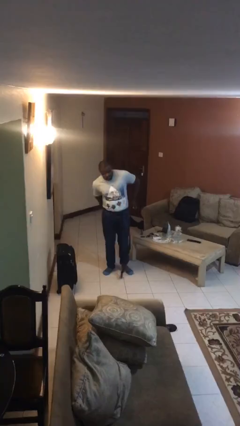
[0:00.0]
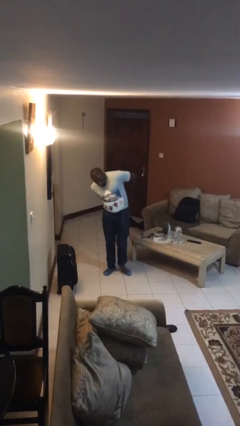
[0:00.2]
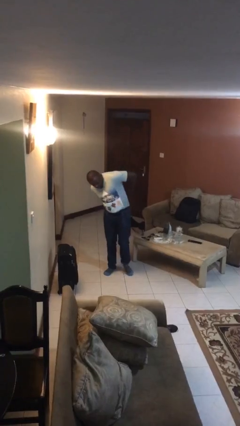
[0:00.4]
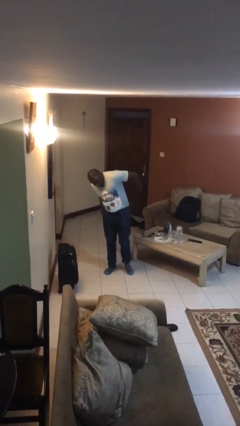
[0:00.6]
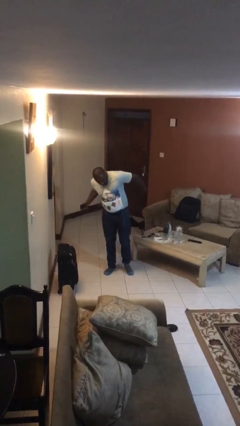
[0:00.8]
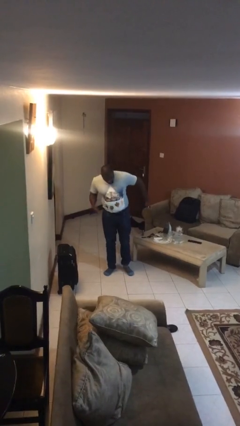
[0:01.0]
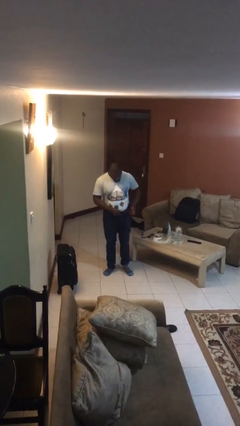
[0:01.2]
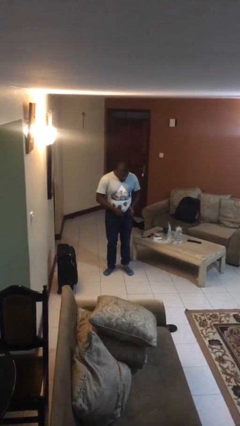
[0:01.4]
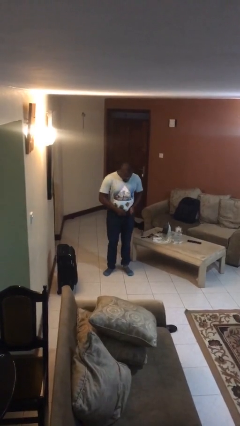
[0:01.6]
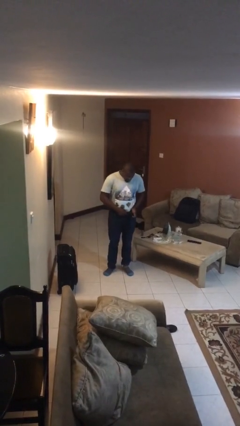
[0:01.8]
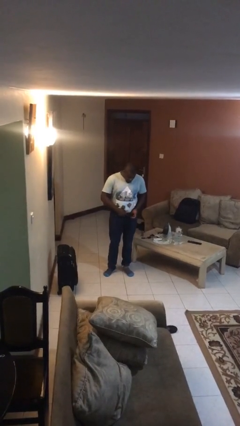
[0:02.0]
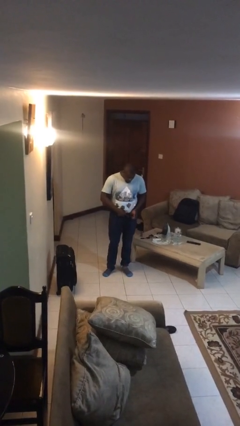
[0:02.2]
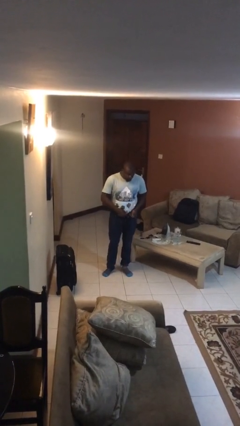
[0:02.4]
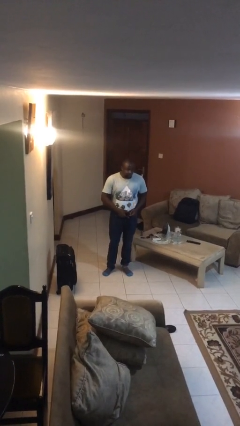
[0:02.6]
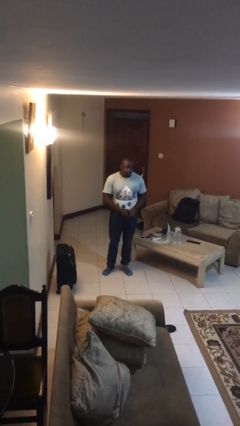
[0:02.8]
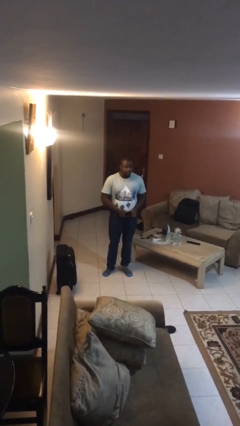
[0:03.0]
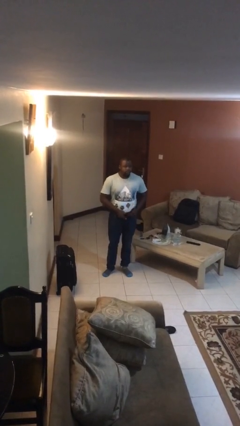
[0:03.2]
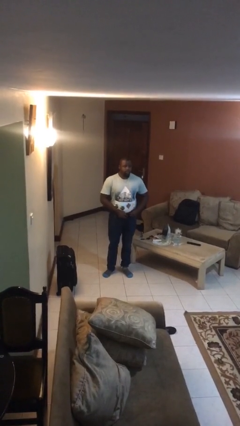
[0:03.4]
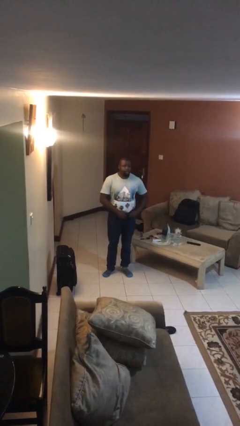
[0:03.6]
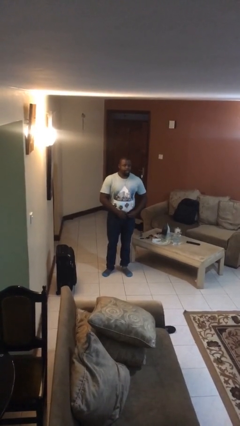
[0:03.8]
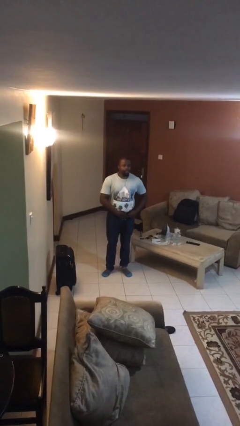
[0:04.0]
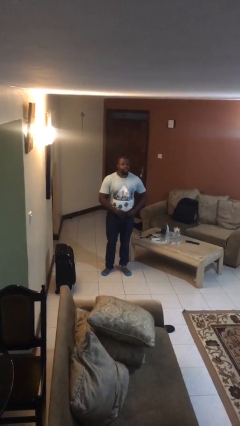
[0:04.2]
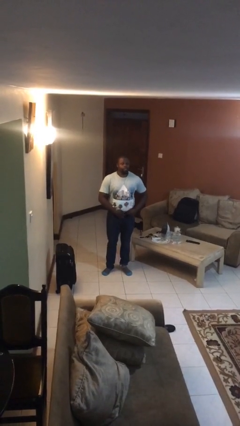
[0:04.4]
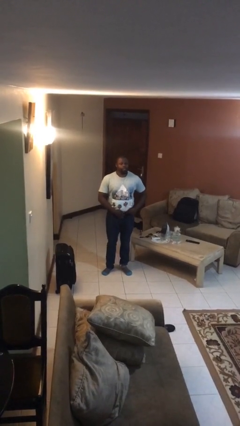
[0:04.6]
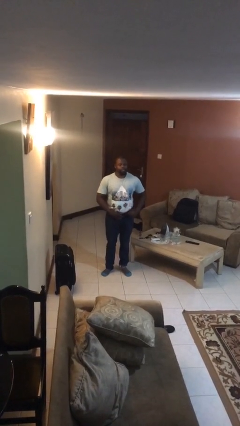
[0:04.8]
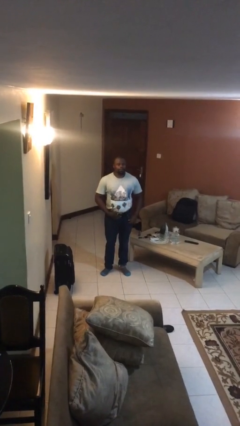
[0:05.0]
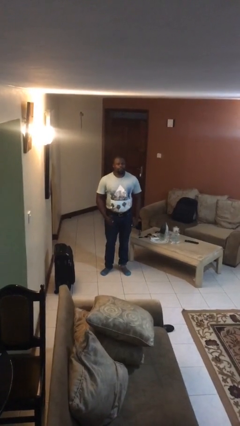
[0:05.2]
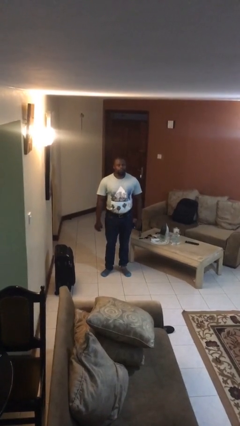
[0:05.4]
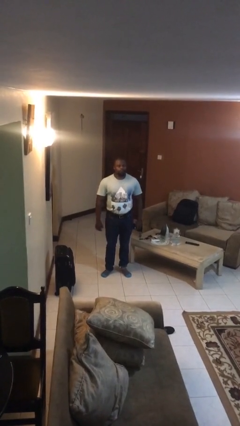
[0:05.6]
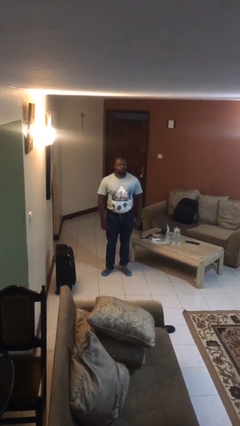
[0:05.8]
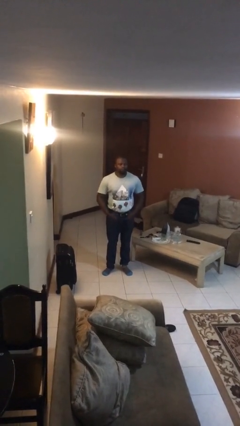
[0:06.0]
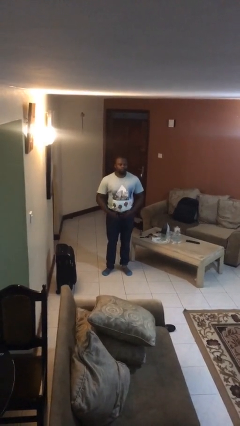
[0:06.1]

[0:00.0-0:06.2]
person puts on belt

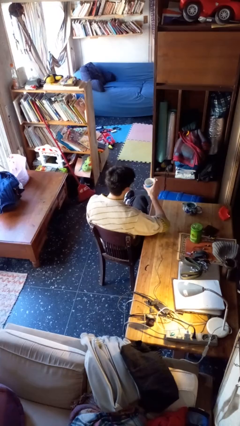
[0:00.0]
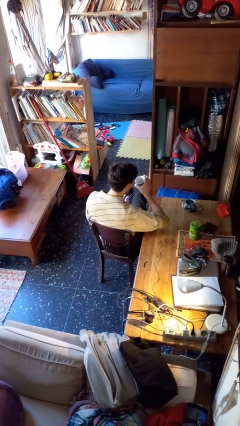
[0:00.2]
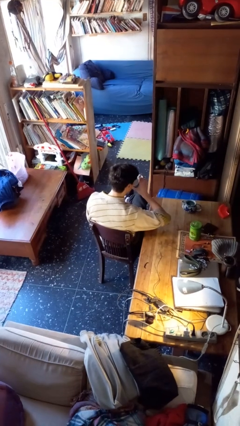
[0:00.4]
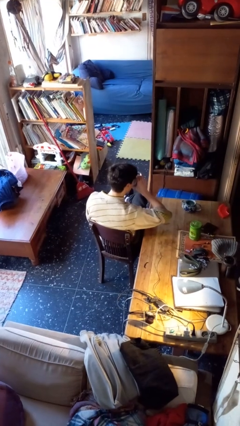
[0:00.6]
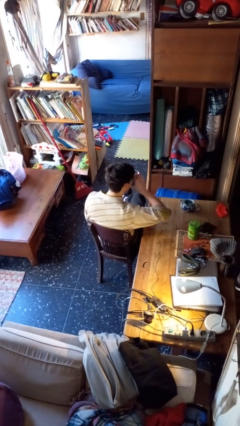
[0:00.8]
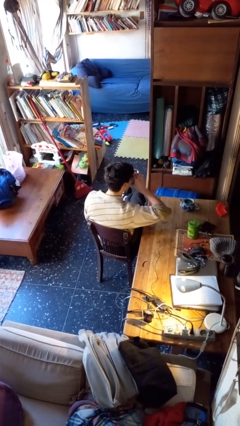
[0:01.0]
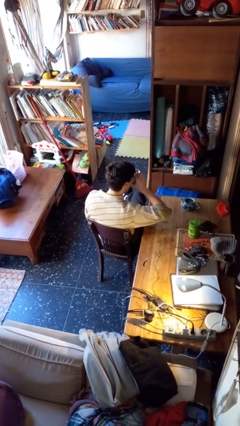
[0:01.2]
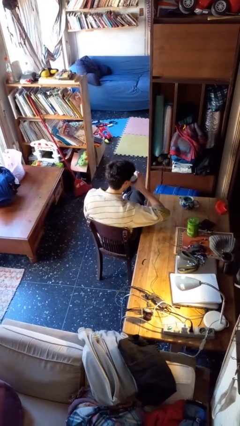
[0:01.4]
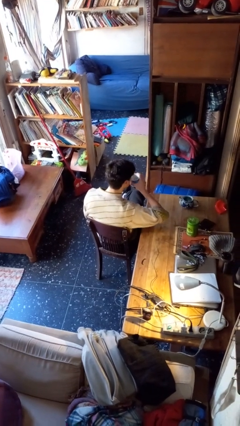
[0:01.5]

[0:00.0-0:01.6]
person drinks from mug

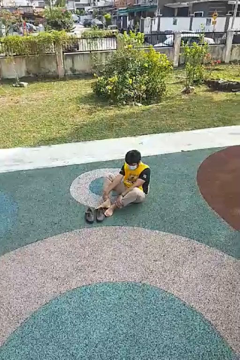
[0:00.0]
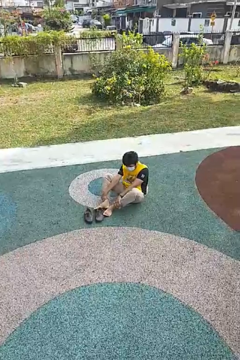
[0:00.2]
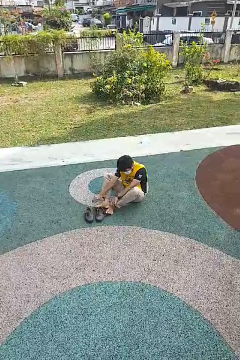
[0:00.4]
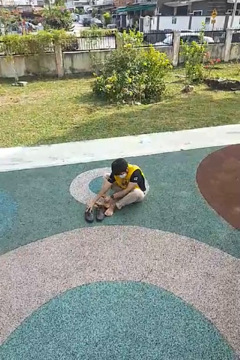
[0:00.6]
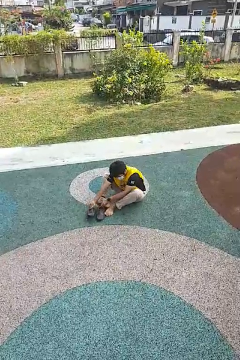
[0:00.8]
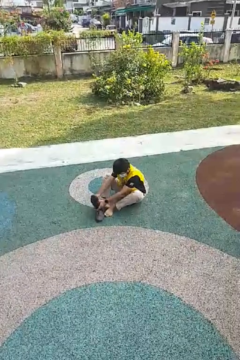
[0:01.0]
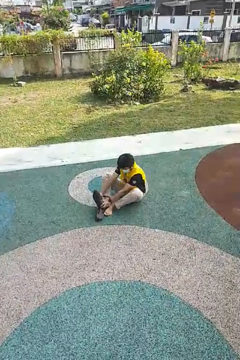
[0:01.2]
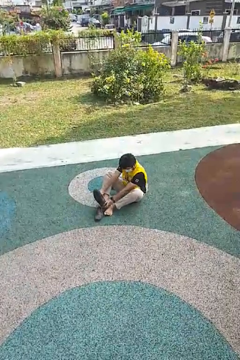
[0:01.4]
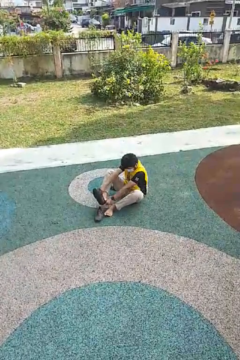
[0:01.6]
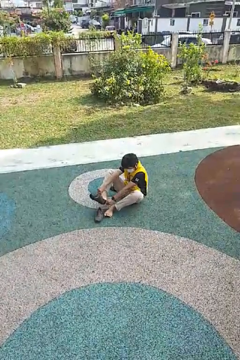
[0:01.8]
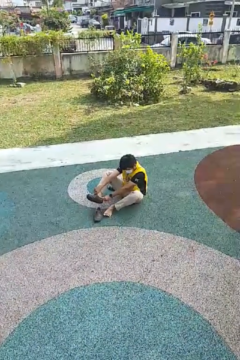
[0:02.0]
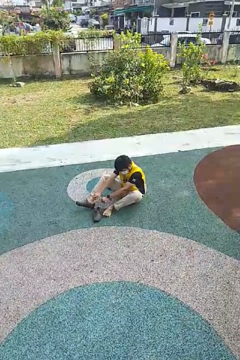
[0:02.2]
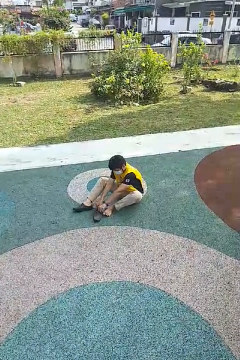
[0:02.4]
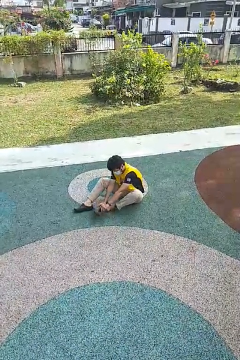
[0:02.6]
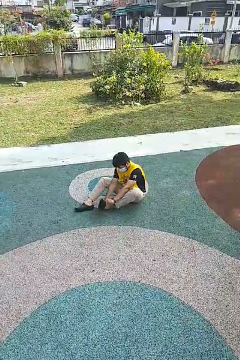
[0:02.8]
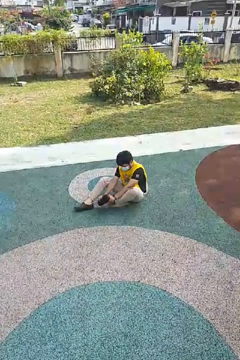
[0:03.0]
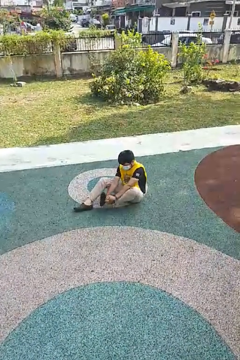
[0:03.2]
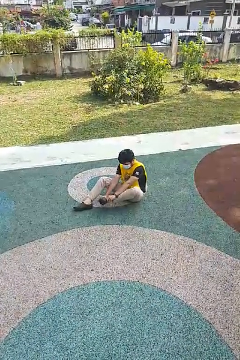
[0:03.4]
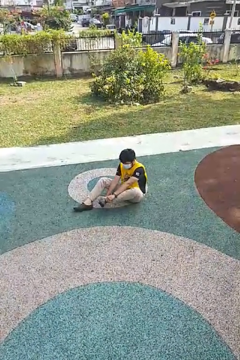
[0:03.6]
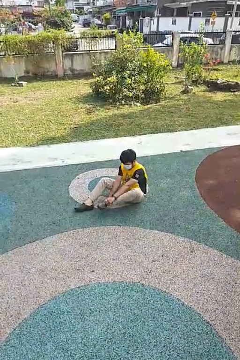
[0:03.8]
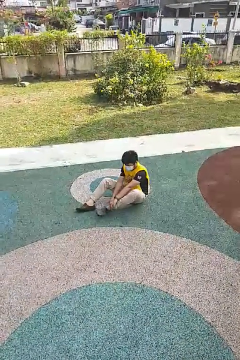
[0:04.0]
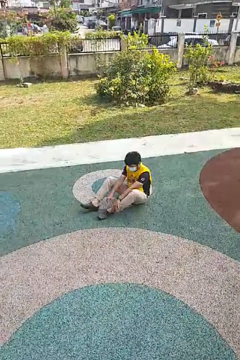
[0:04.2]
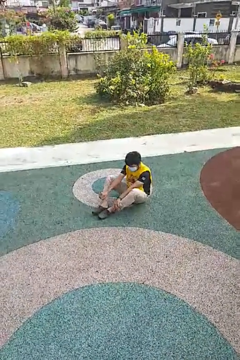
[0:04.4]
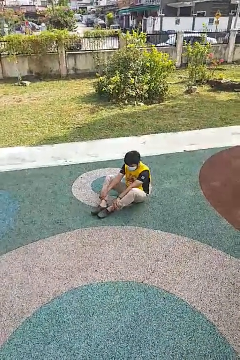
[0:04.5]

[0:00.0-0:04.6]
person puts on shoes

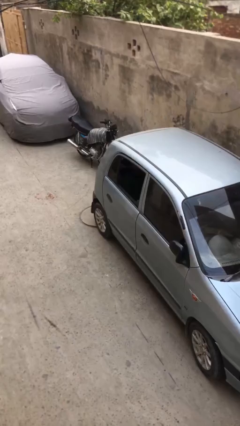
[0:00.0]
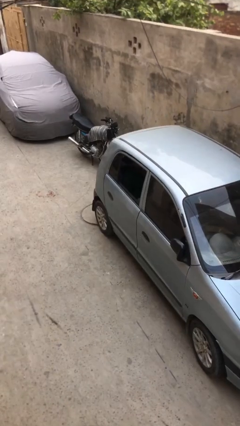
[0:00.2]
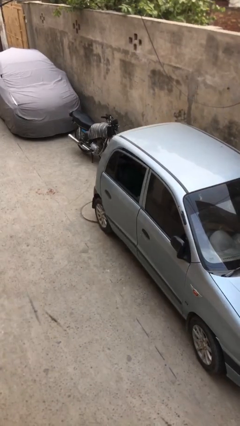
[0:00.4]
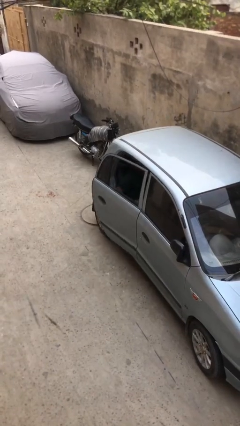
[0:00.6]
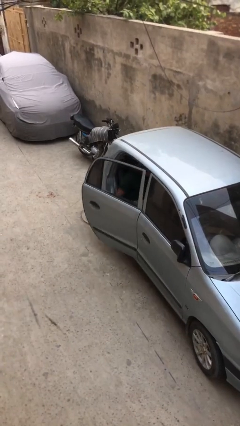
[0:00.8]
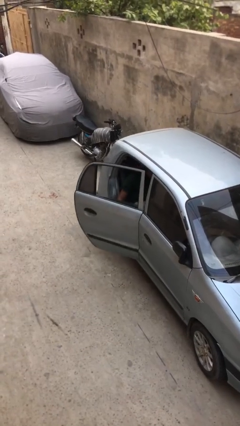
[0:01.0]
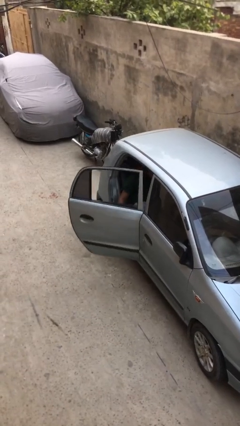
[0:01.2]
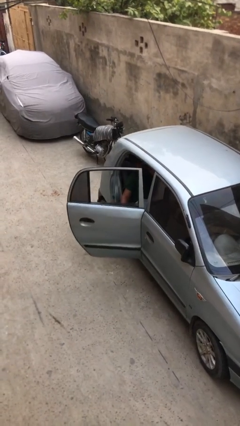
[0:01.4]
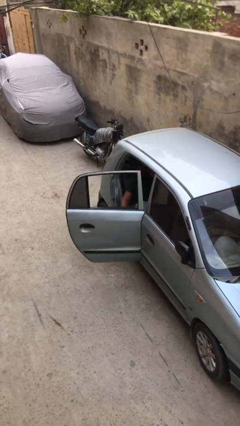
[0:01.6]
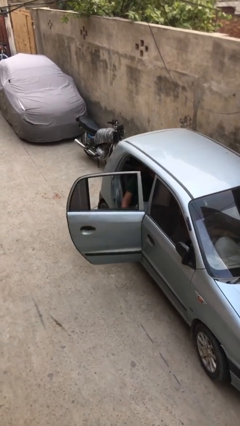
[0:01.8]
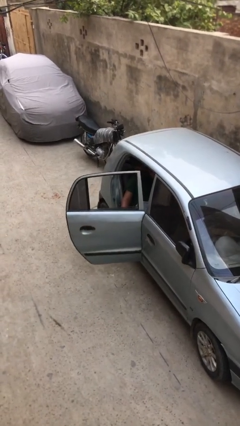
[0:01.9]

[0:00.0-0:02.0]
person opens car door

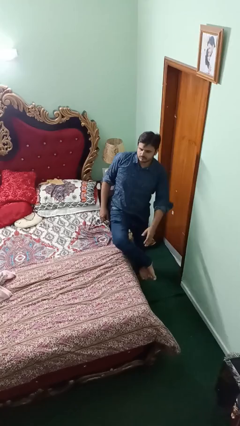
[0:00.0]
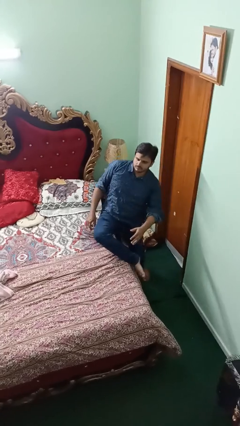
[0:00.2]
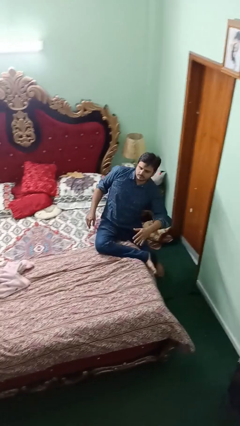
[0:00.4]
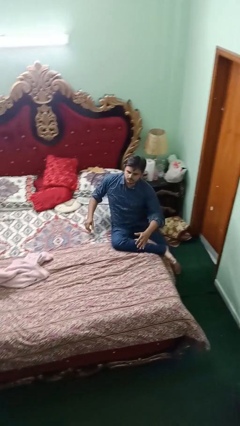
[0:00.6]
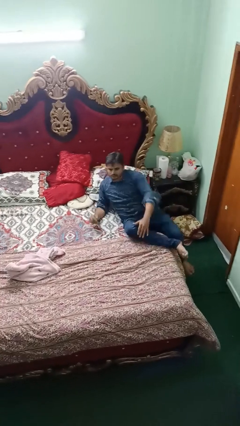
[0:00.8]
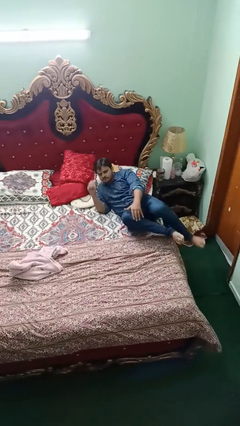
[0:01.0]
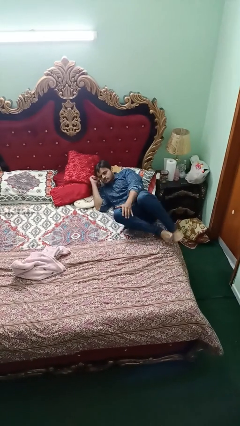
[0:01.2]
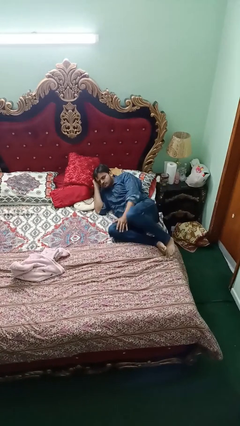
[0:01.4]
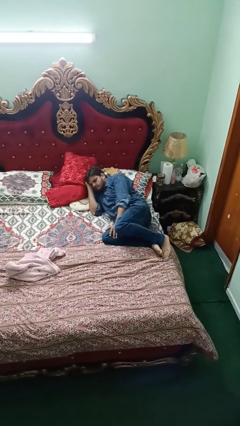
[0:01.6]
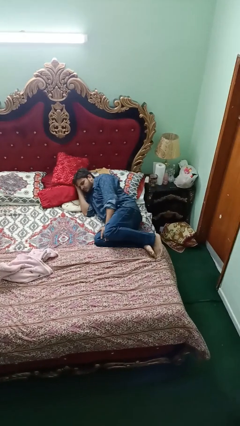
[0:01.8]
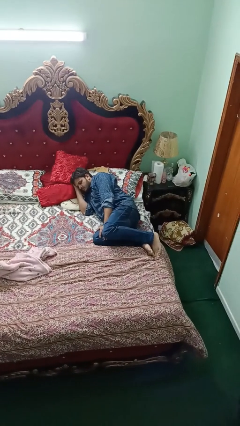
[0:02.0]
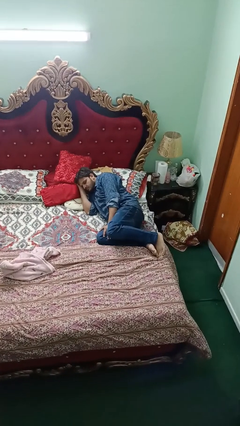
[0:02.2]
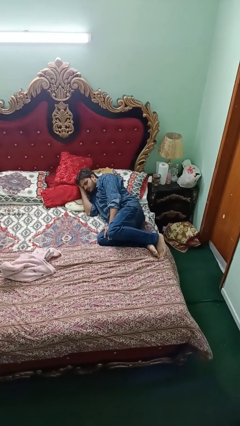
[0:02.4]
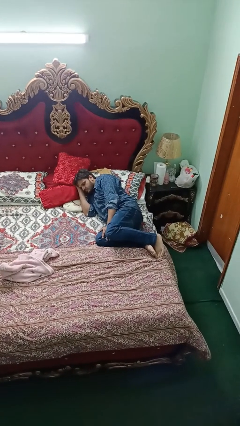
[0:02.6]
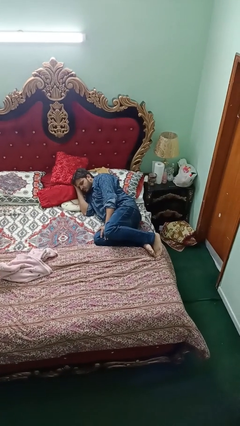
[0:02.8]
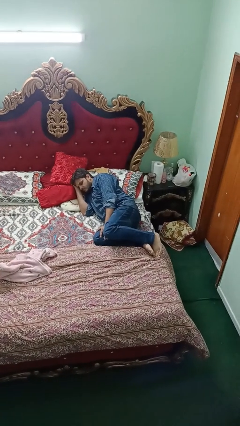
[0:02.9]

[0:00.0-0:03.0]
person lies down on bed

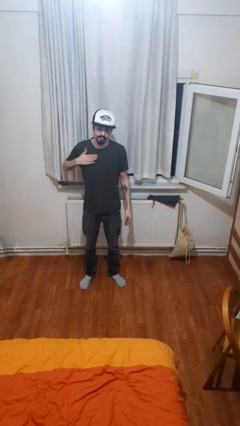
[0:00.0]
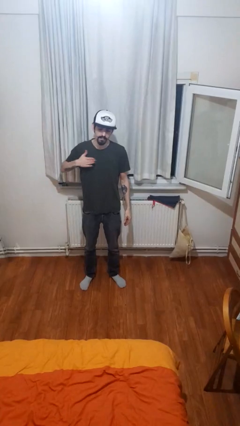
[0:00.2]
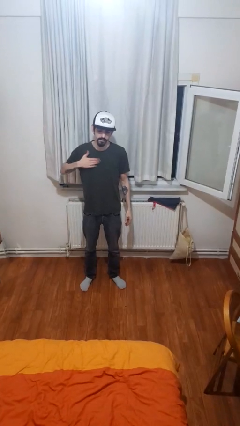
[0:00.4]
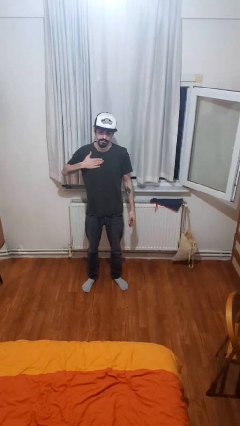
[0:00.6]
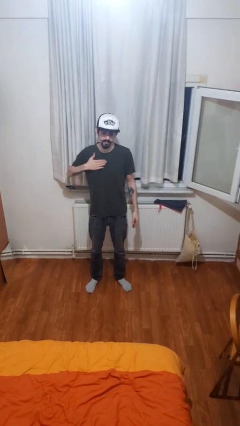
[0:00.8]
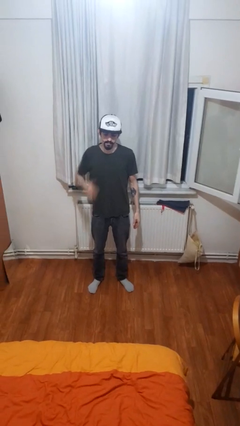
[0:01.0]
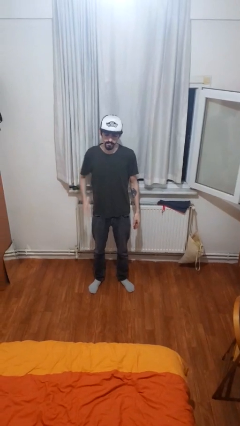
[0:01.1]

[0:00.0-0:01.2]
person drums on chest
